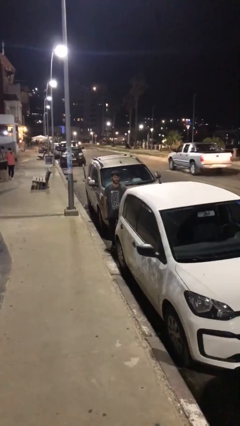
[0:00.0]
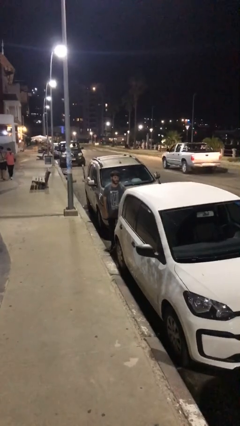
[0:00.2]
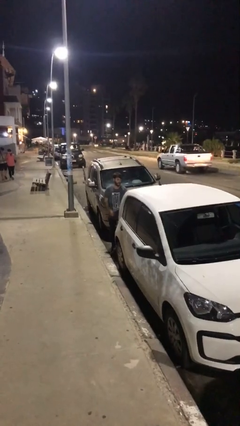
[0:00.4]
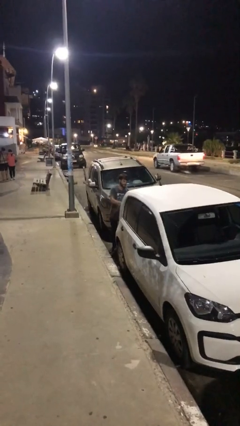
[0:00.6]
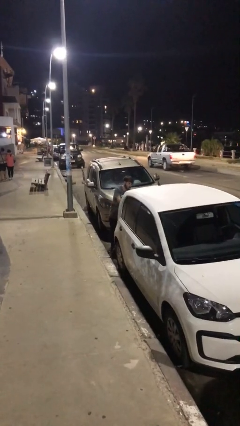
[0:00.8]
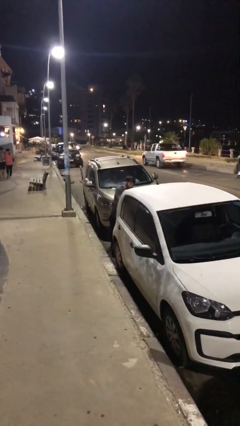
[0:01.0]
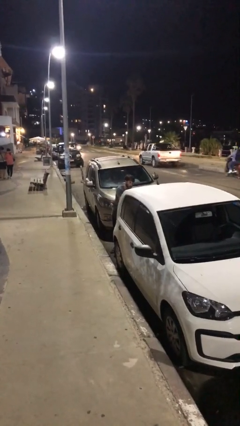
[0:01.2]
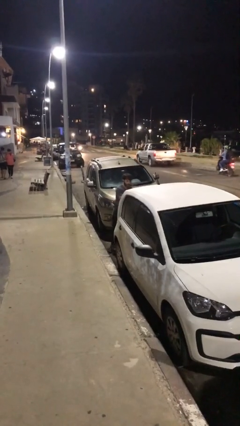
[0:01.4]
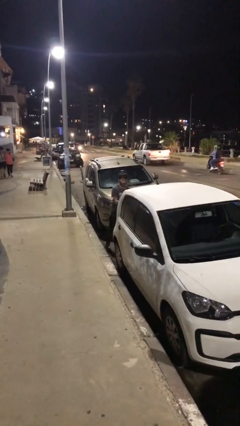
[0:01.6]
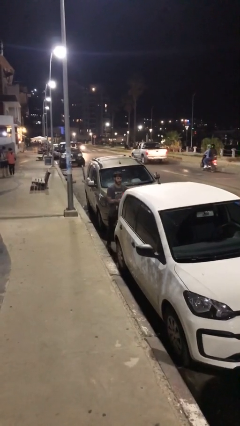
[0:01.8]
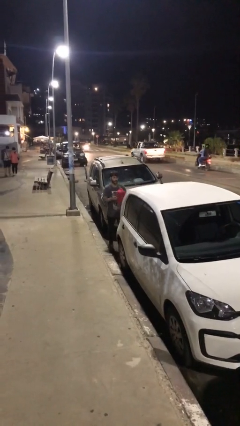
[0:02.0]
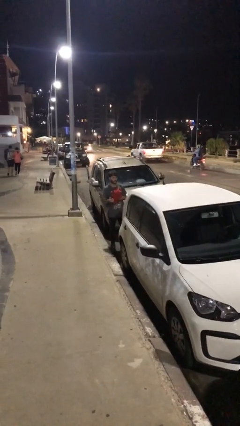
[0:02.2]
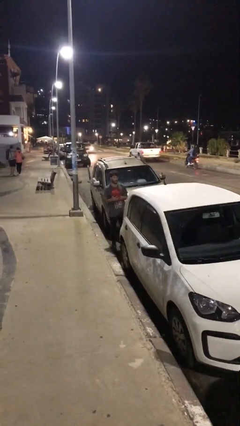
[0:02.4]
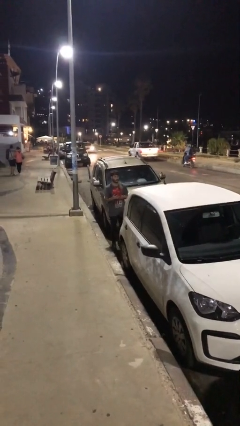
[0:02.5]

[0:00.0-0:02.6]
person unloads car

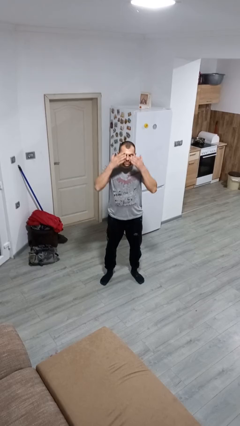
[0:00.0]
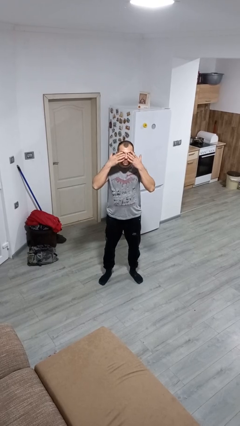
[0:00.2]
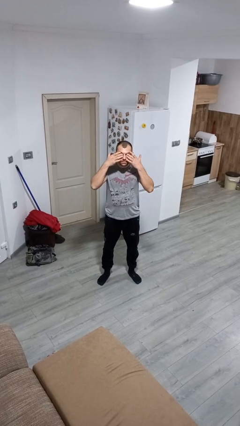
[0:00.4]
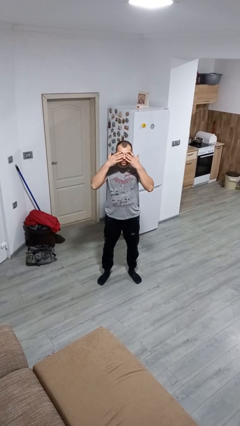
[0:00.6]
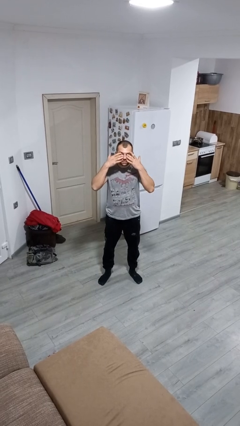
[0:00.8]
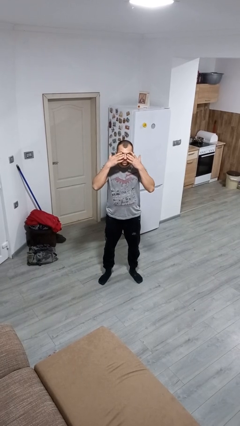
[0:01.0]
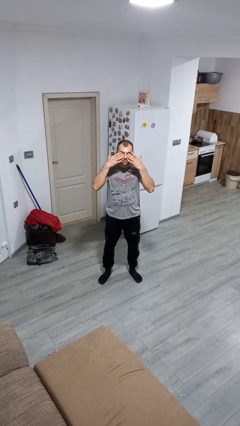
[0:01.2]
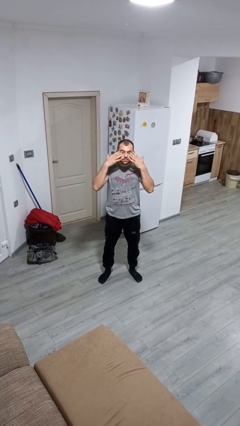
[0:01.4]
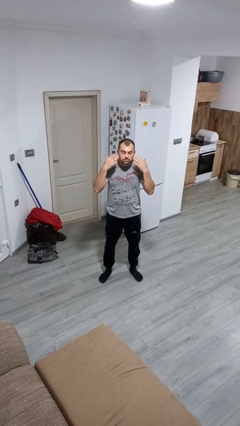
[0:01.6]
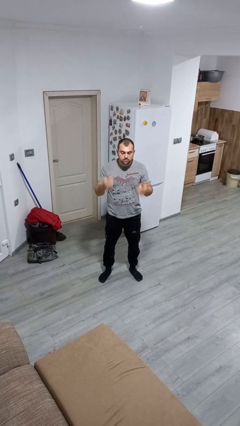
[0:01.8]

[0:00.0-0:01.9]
person rubs eyes

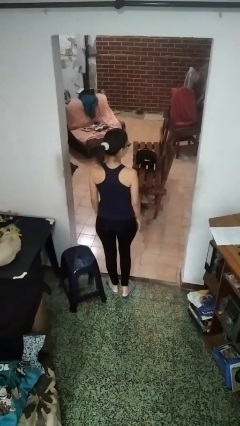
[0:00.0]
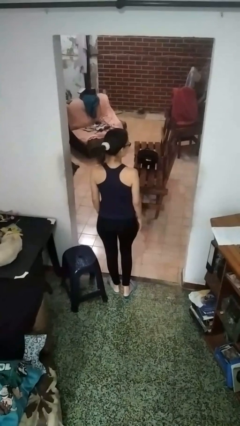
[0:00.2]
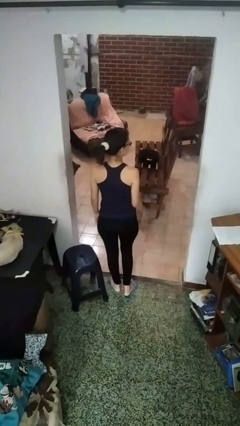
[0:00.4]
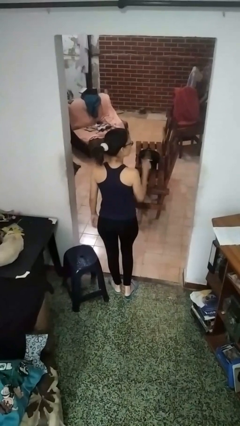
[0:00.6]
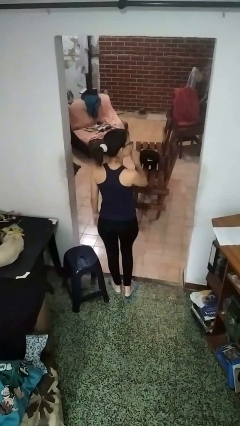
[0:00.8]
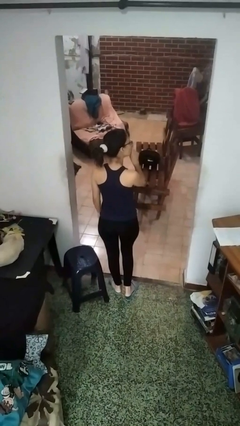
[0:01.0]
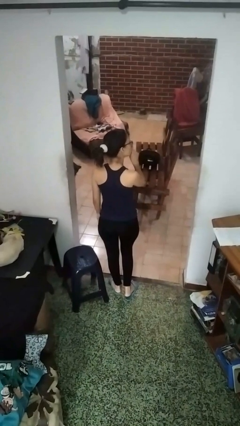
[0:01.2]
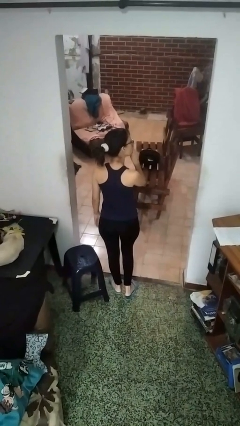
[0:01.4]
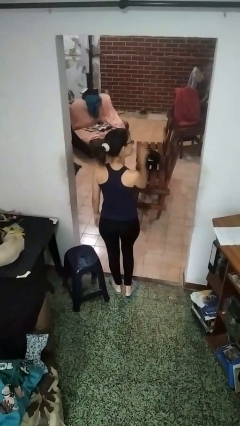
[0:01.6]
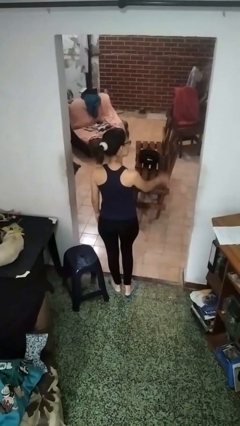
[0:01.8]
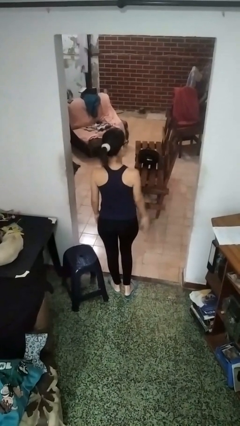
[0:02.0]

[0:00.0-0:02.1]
person gestures be quiet

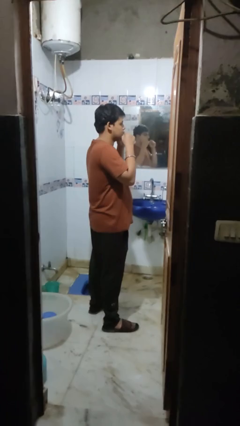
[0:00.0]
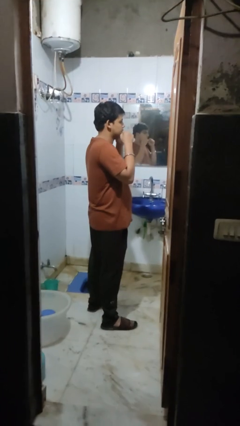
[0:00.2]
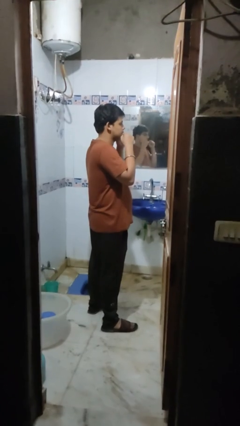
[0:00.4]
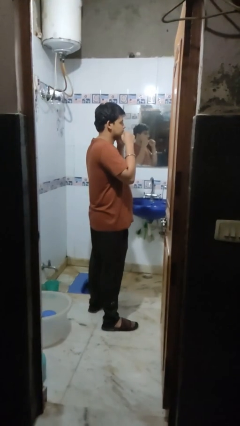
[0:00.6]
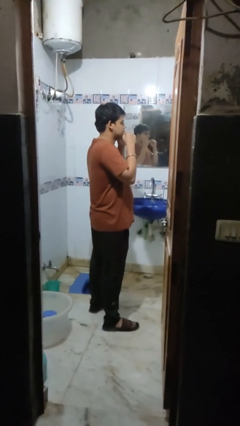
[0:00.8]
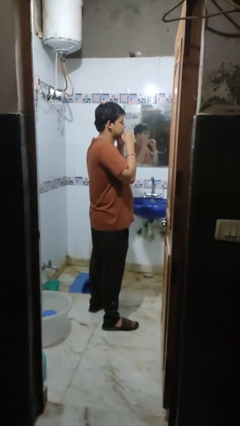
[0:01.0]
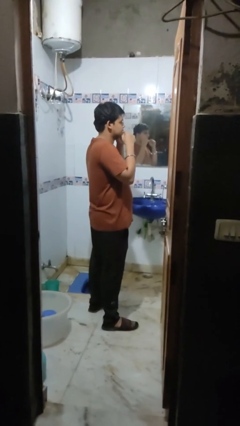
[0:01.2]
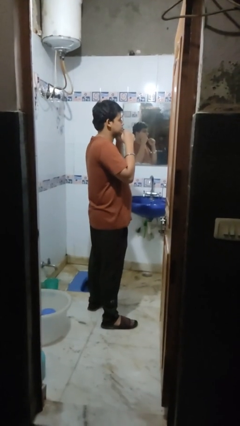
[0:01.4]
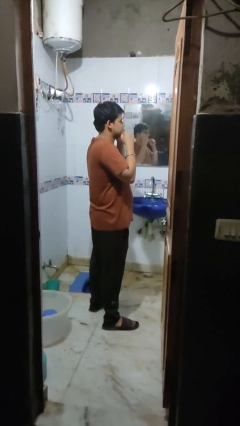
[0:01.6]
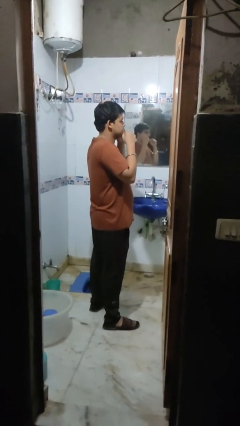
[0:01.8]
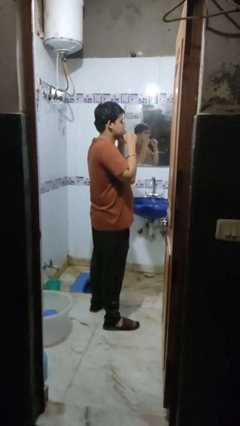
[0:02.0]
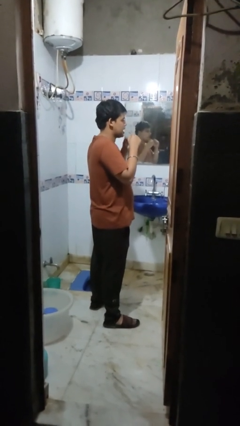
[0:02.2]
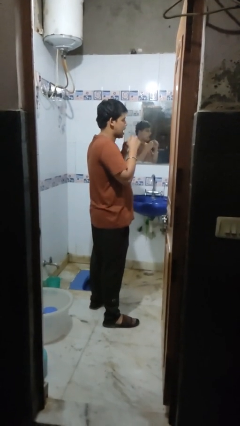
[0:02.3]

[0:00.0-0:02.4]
person flosses

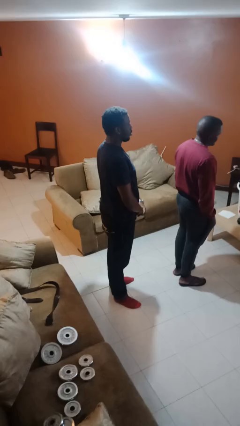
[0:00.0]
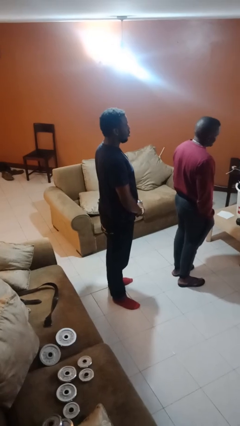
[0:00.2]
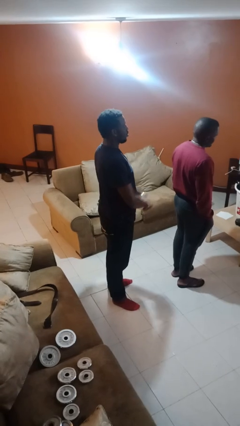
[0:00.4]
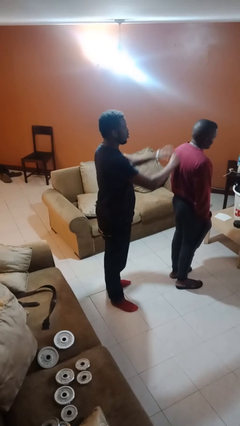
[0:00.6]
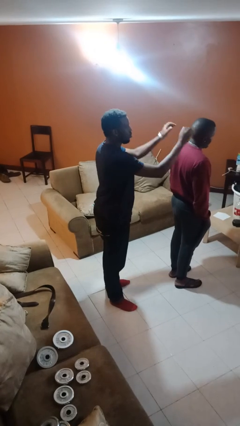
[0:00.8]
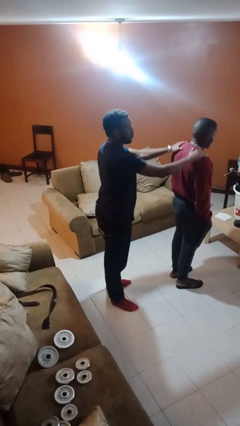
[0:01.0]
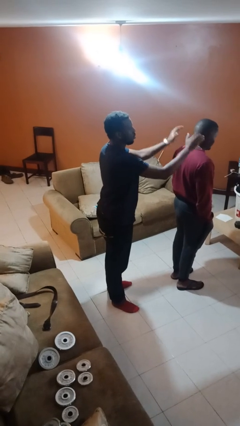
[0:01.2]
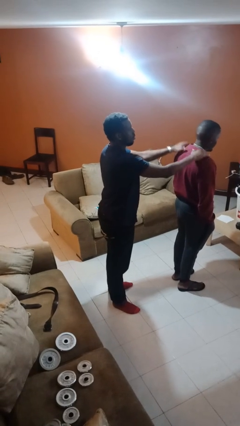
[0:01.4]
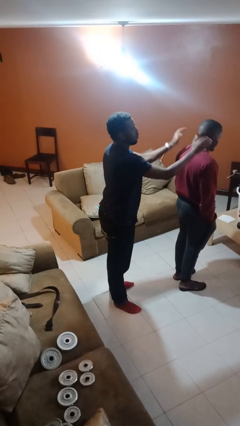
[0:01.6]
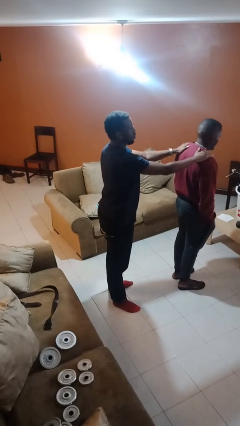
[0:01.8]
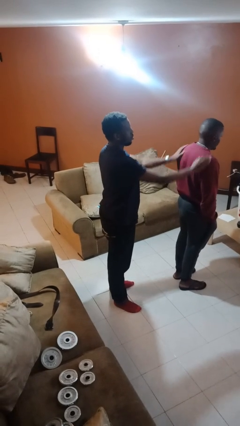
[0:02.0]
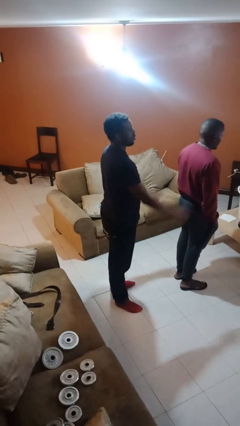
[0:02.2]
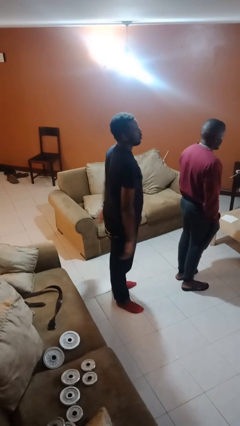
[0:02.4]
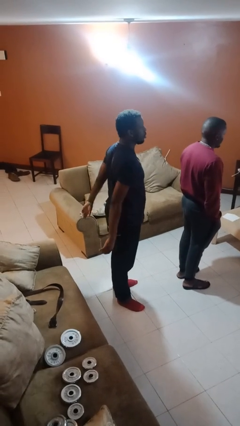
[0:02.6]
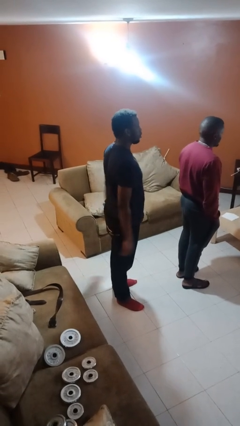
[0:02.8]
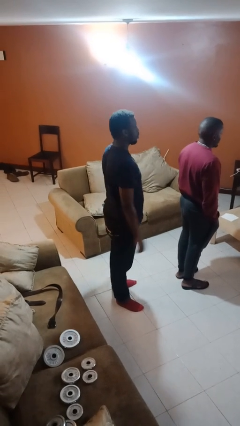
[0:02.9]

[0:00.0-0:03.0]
person pounds shoulders of person

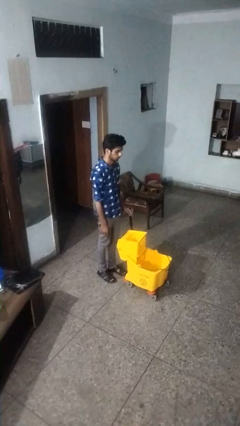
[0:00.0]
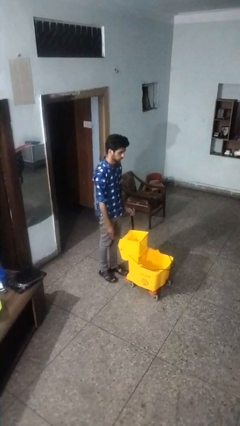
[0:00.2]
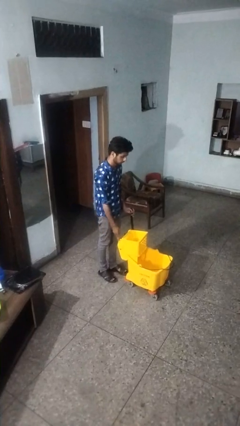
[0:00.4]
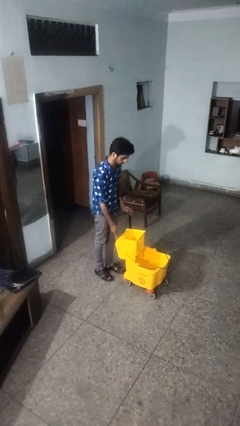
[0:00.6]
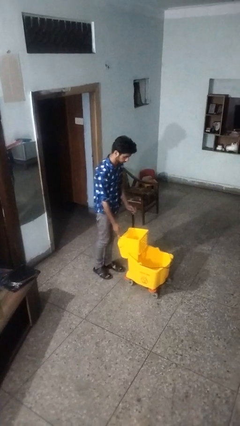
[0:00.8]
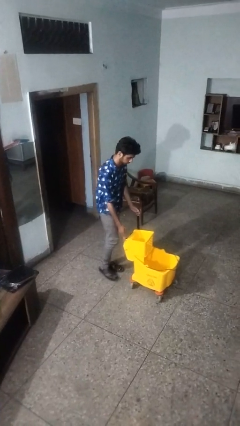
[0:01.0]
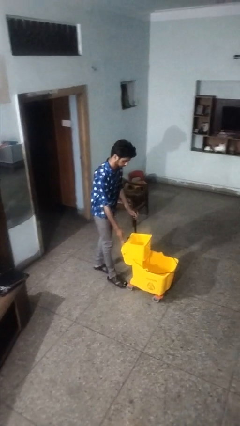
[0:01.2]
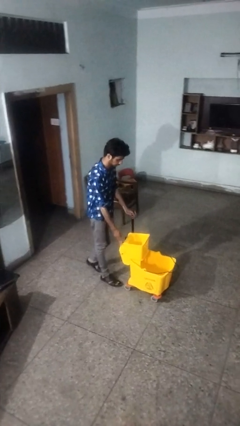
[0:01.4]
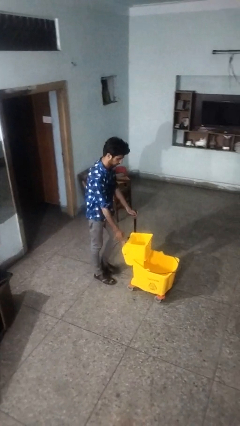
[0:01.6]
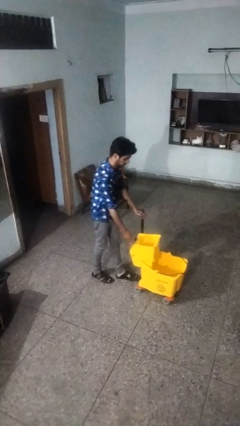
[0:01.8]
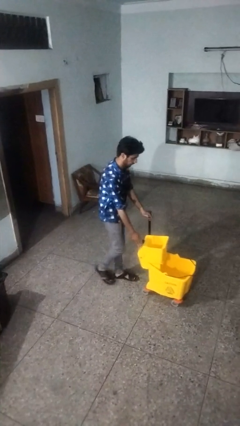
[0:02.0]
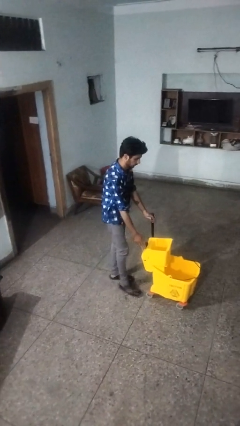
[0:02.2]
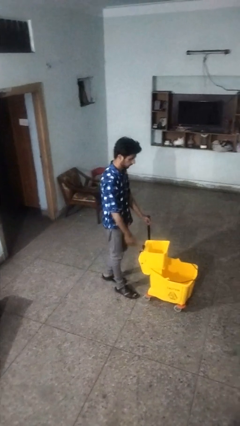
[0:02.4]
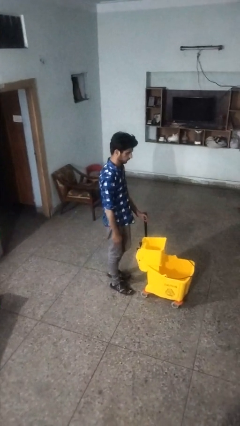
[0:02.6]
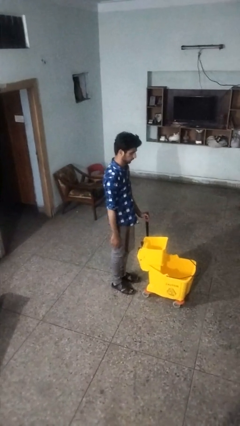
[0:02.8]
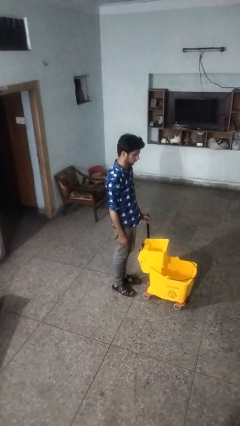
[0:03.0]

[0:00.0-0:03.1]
person pushes wheeled cart

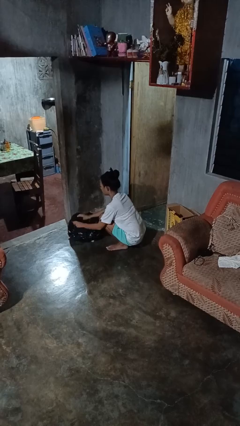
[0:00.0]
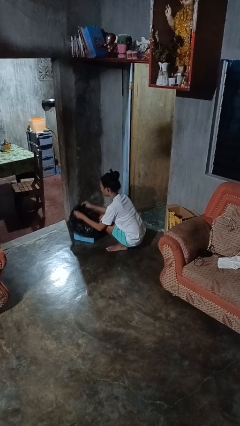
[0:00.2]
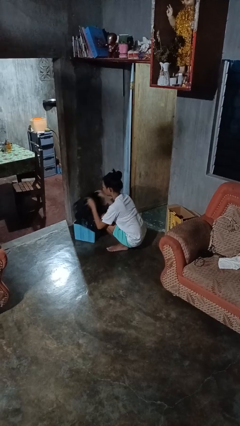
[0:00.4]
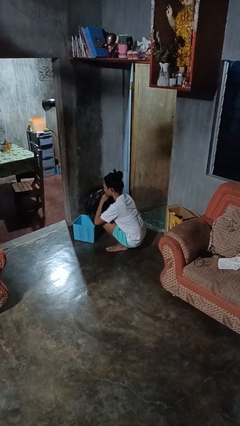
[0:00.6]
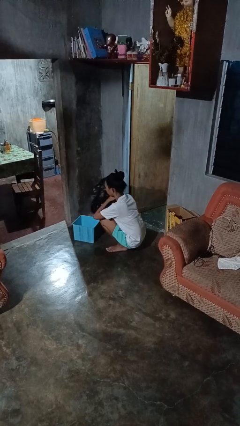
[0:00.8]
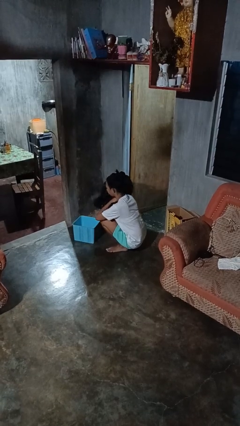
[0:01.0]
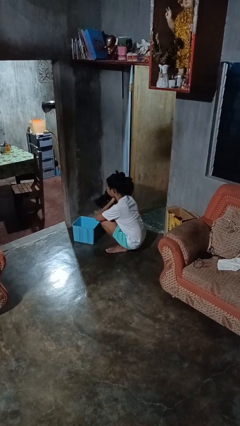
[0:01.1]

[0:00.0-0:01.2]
person removes trashbag from trashcan

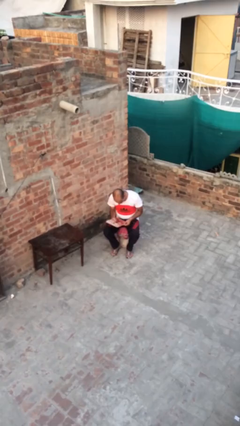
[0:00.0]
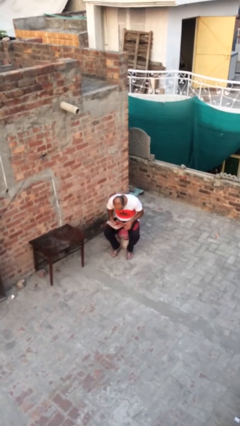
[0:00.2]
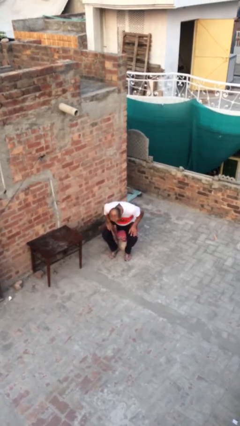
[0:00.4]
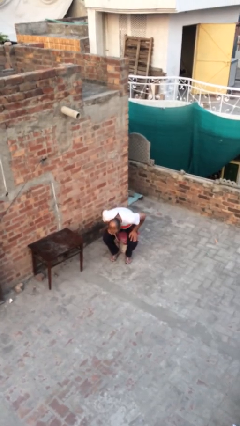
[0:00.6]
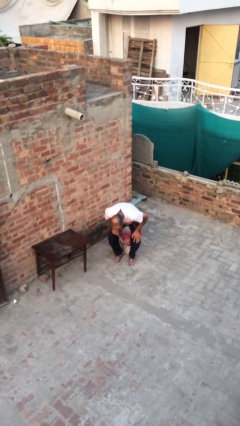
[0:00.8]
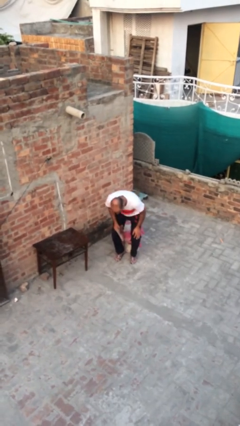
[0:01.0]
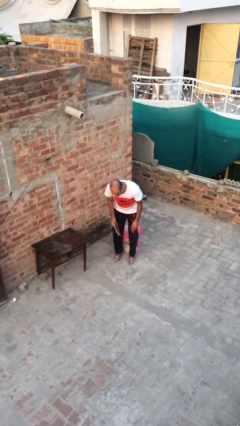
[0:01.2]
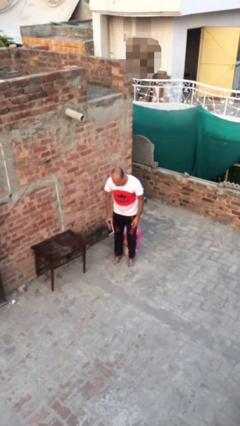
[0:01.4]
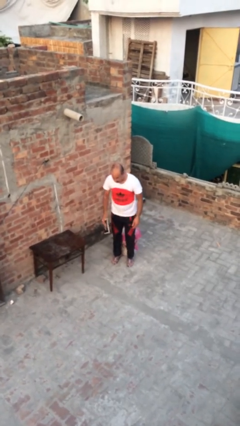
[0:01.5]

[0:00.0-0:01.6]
person stands up
